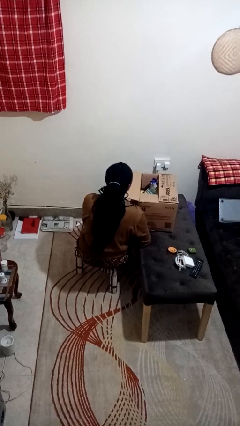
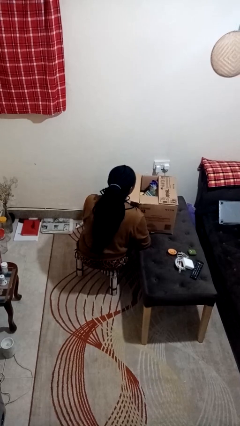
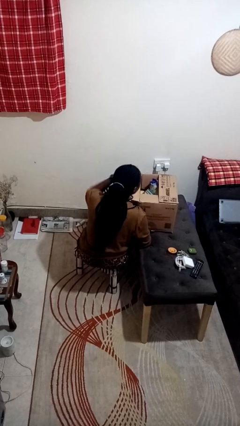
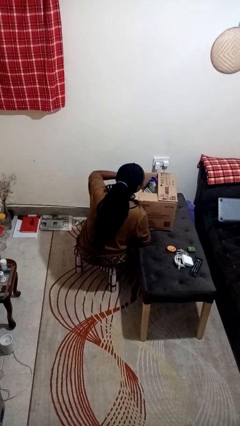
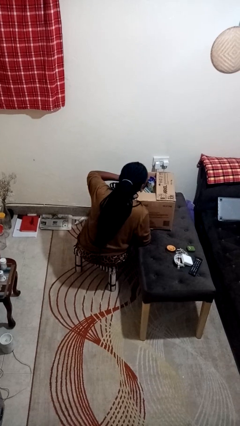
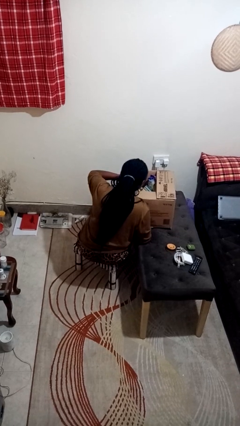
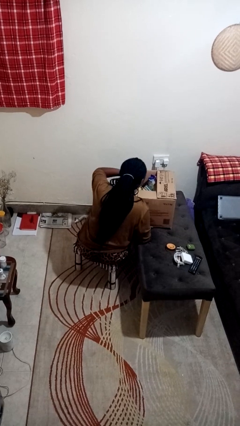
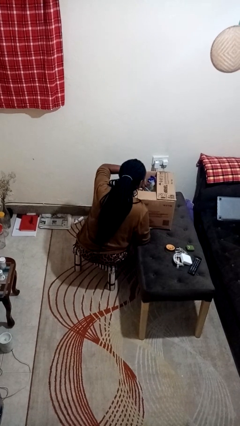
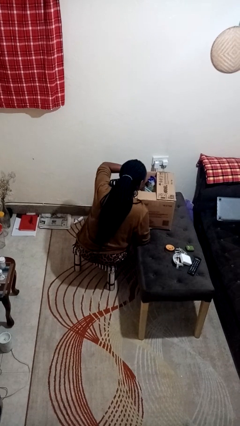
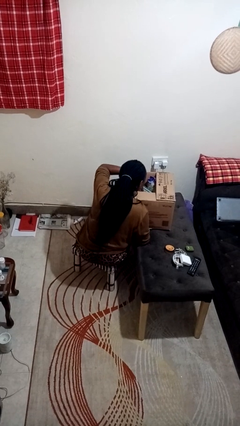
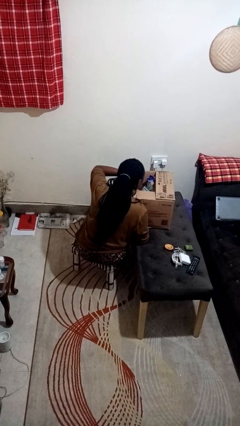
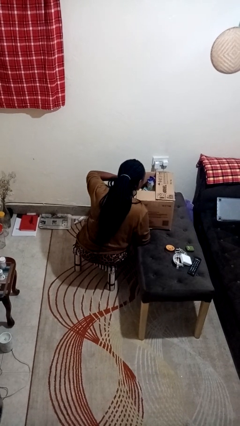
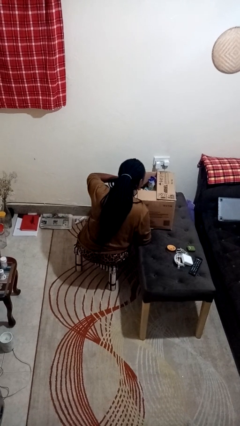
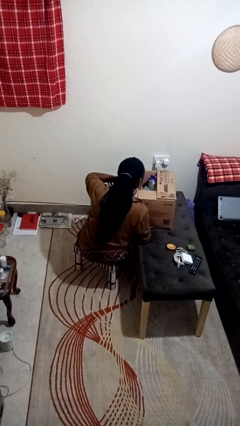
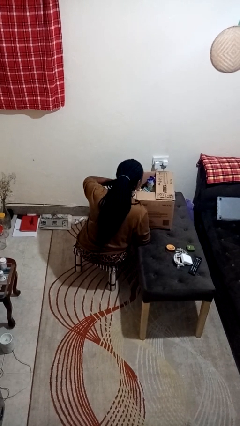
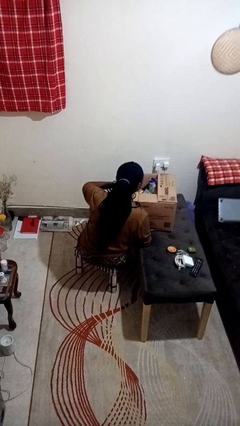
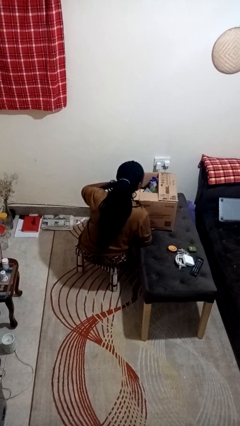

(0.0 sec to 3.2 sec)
person searches in box

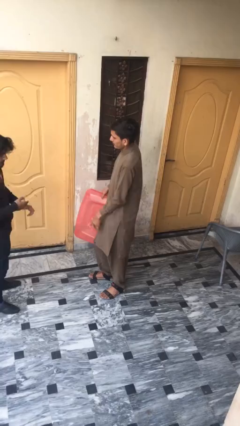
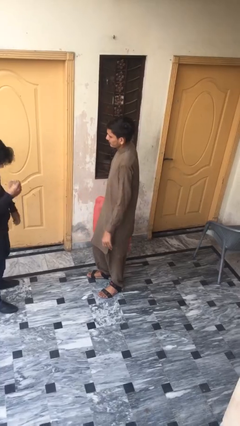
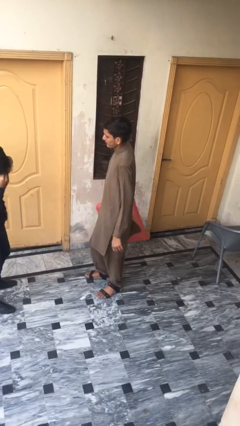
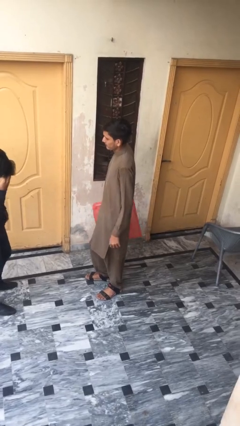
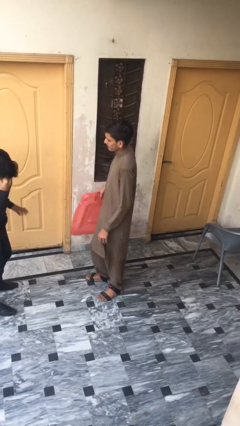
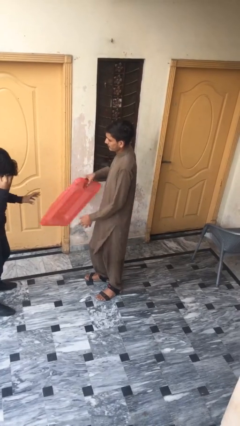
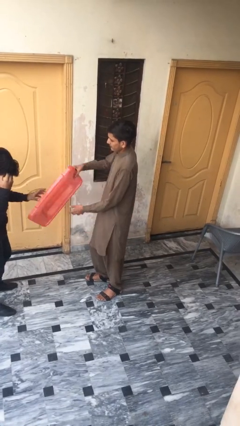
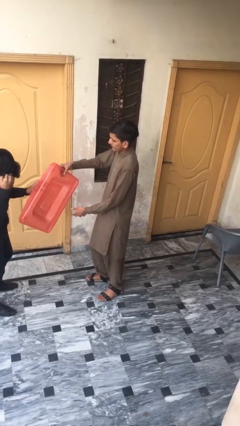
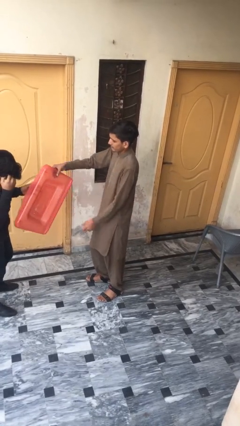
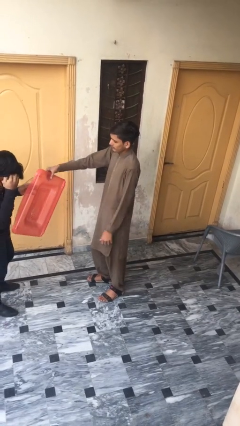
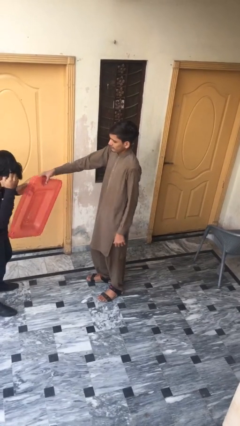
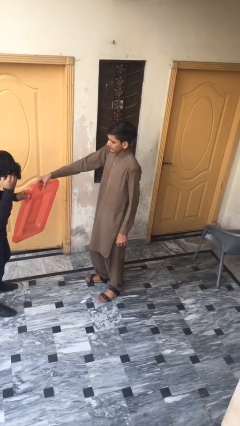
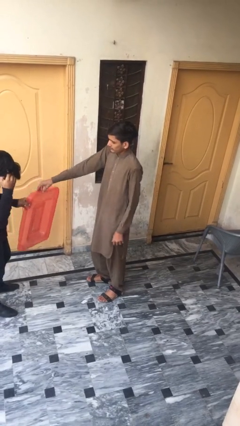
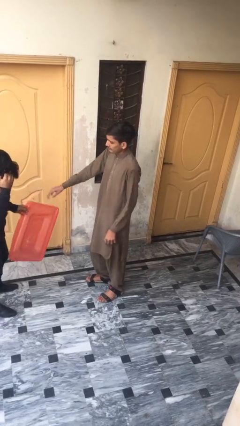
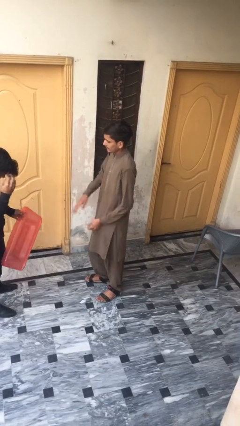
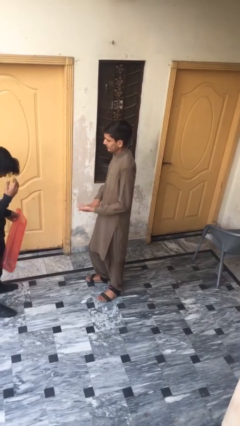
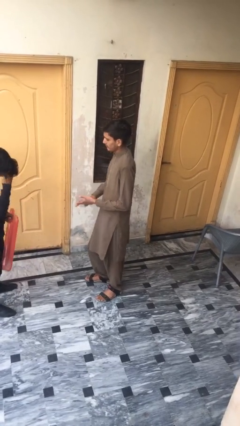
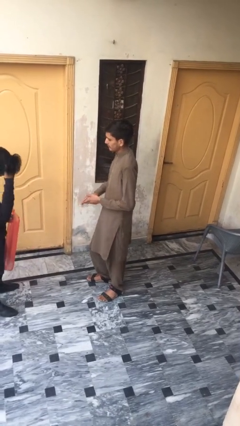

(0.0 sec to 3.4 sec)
person transfers object to person

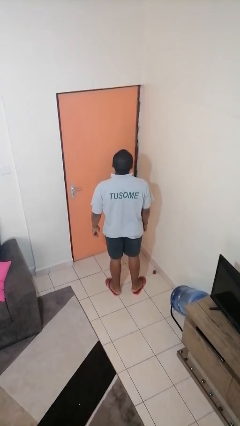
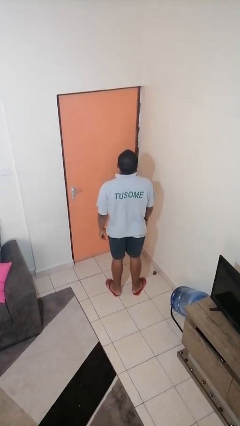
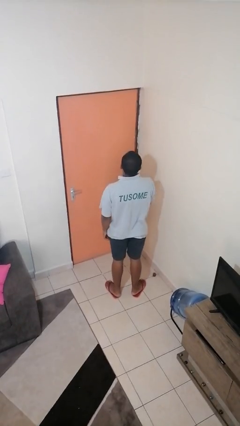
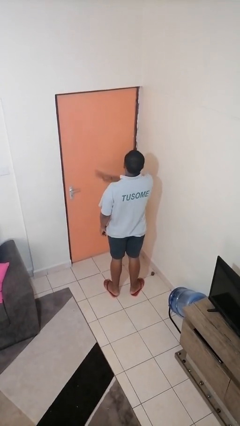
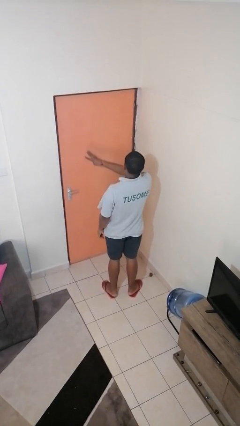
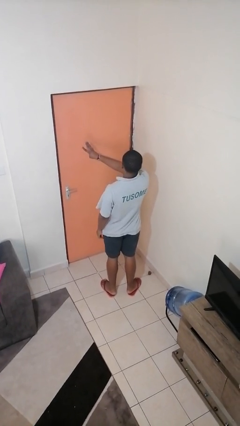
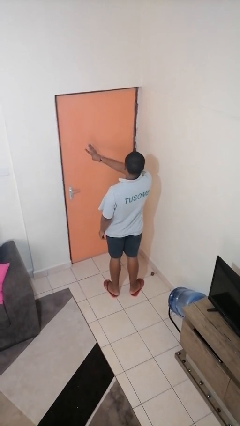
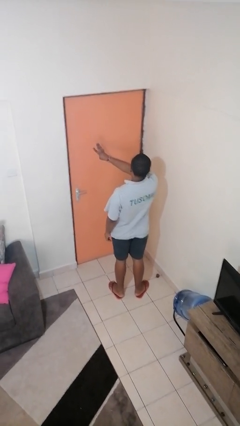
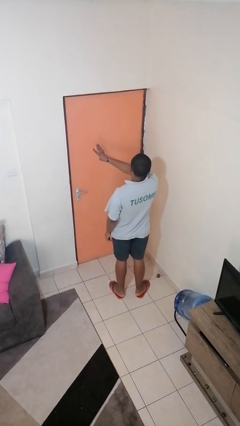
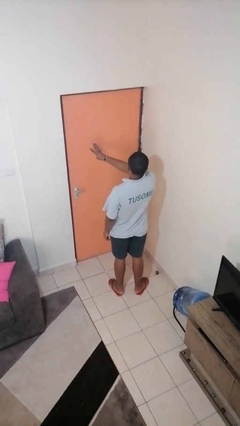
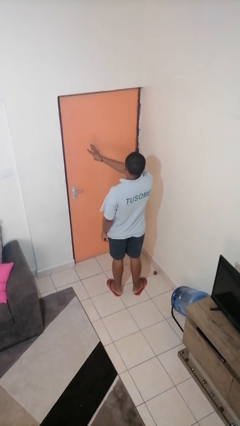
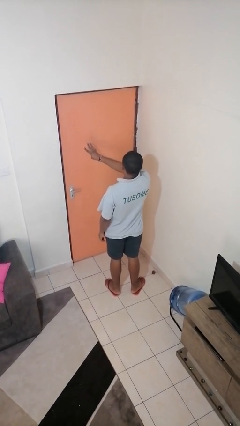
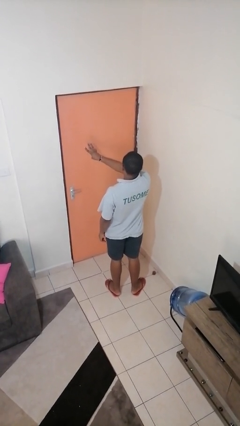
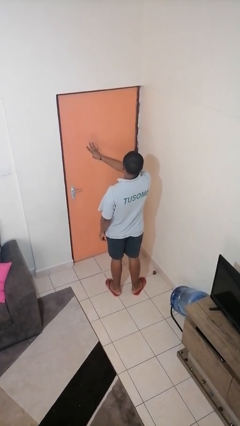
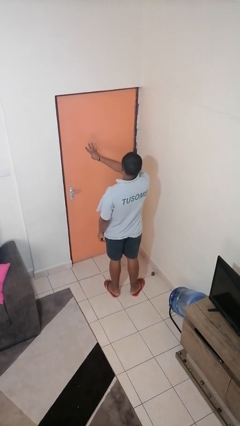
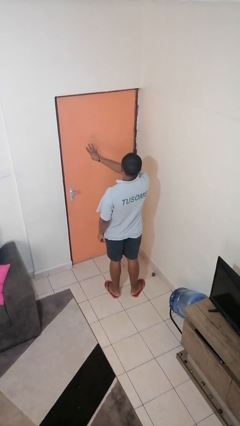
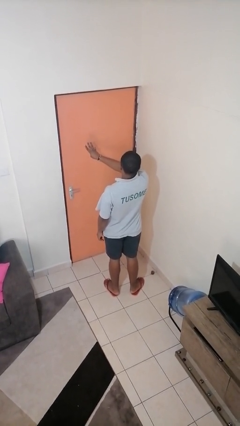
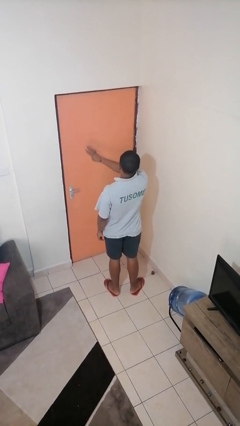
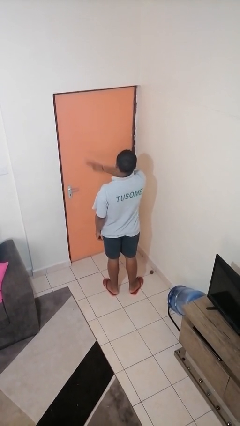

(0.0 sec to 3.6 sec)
person gestures number three

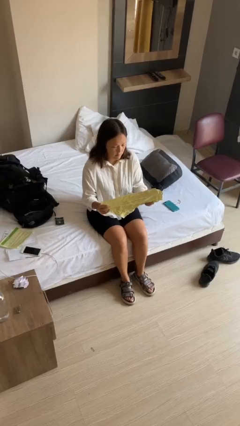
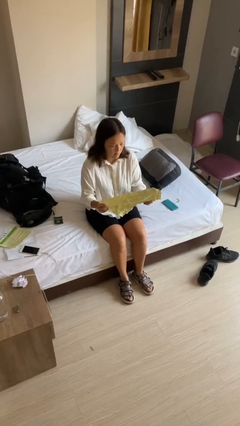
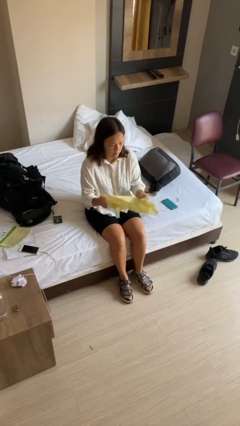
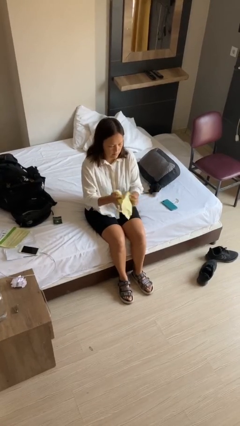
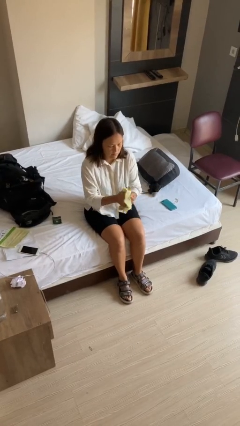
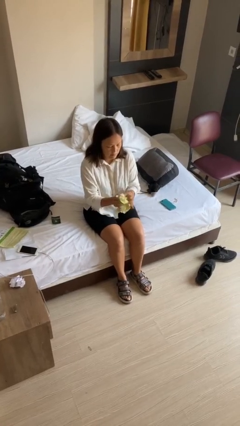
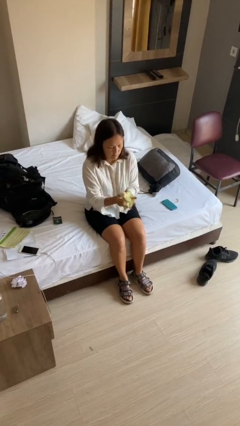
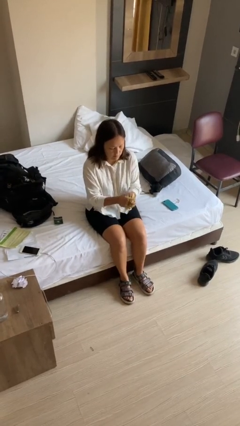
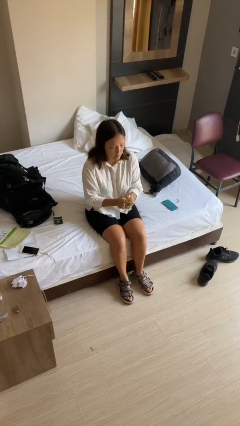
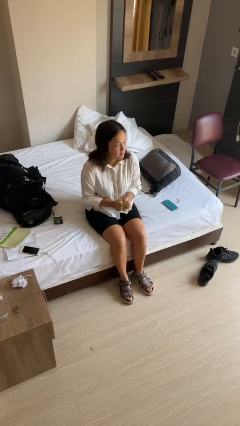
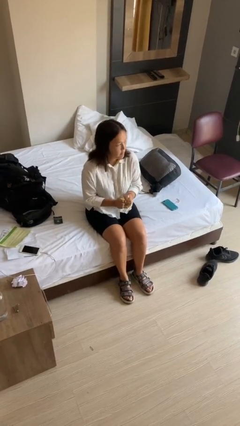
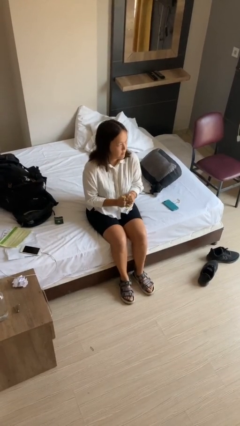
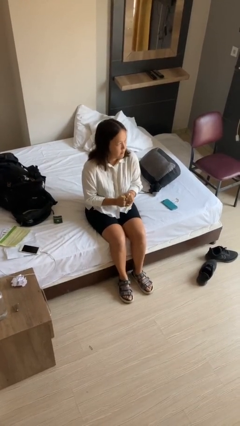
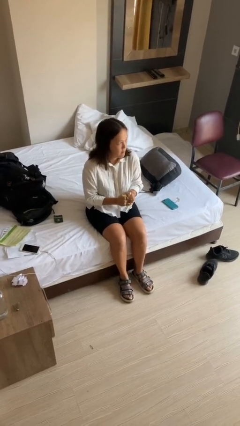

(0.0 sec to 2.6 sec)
person crumples paper

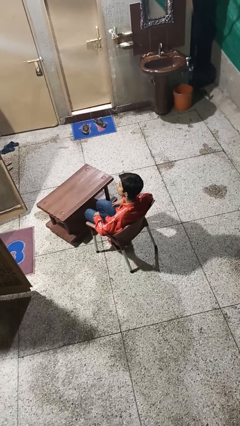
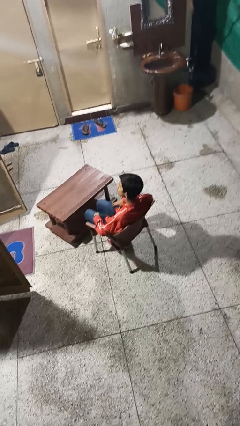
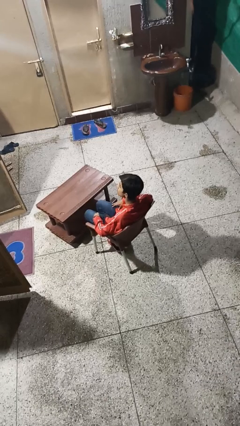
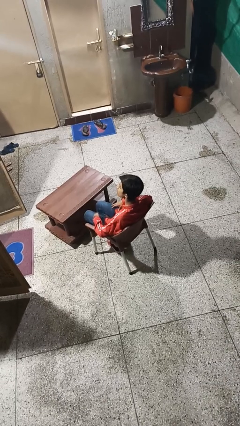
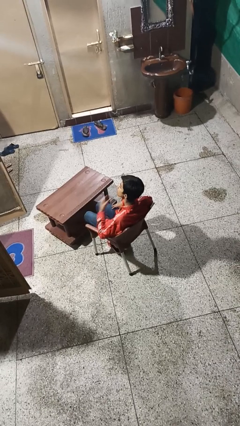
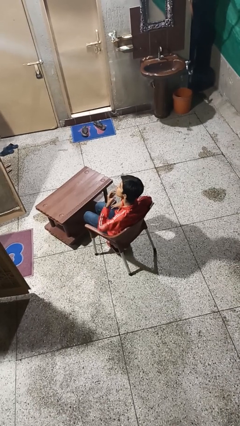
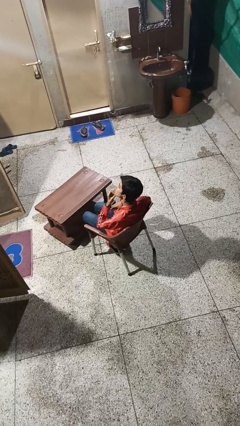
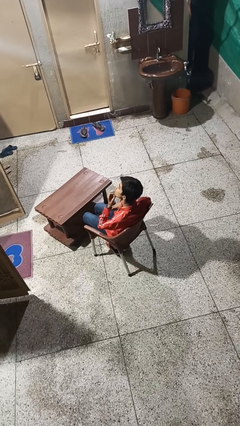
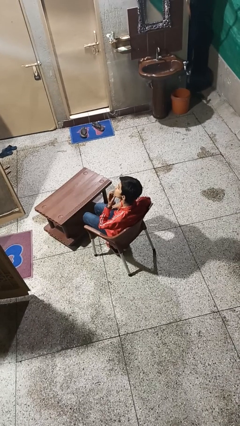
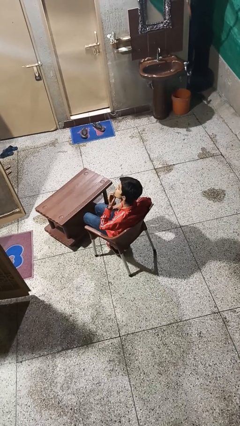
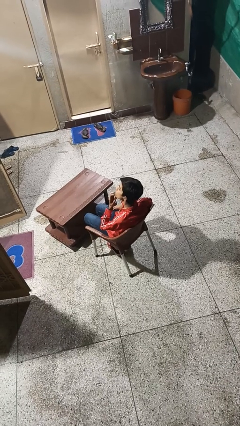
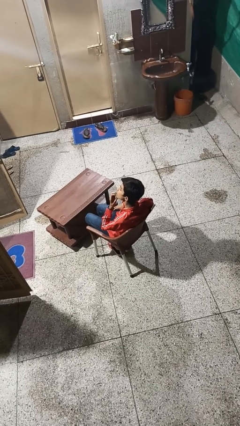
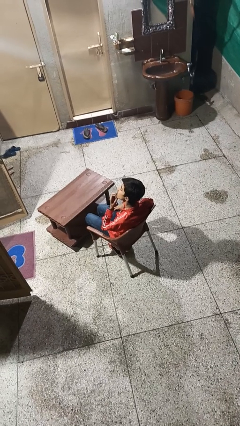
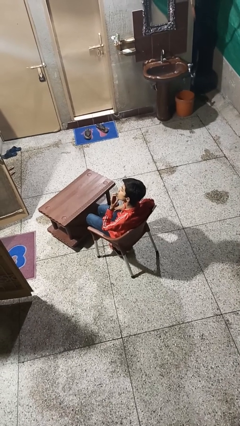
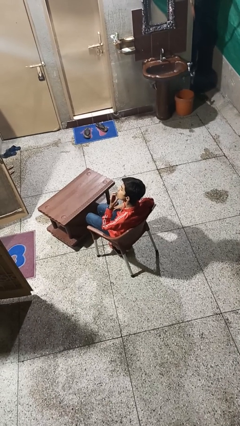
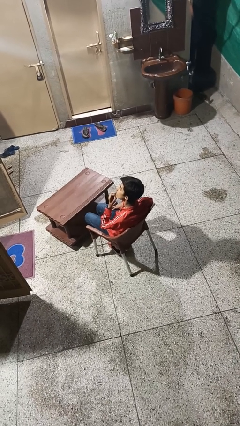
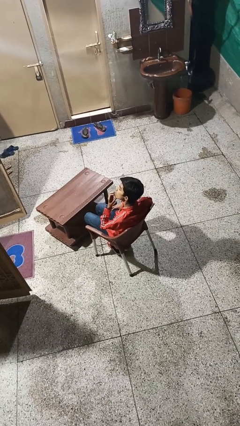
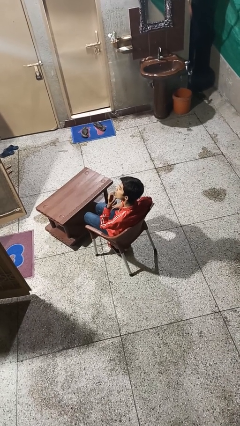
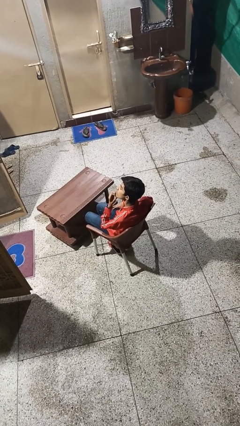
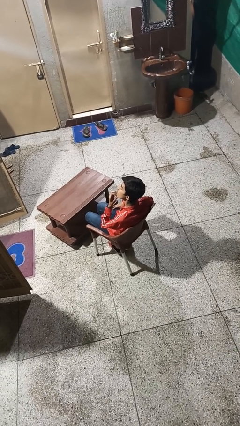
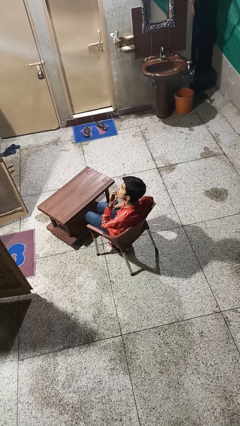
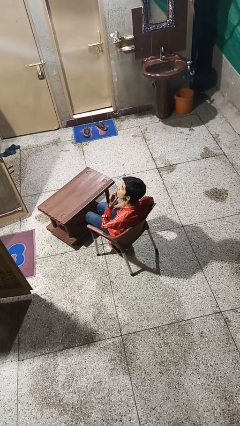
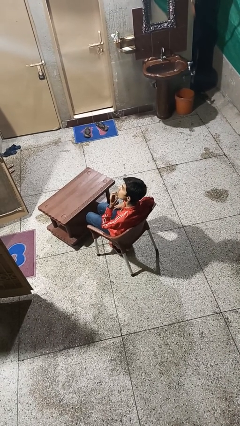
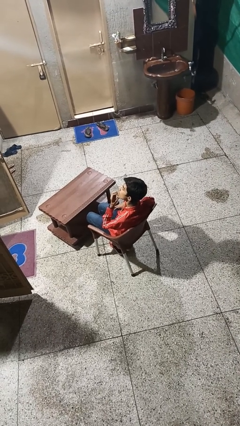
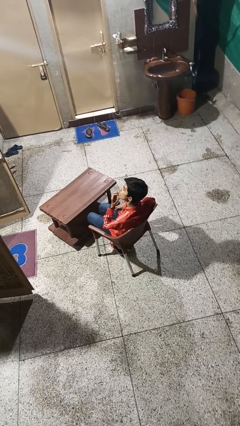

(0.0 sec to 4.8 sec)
person strokes chin
